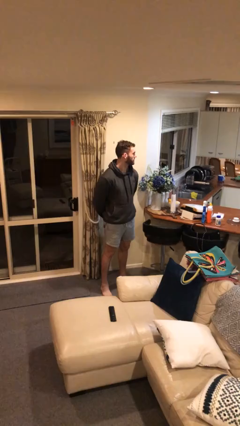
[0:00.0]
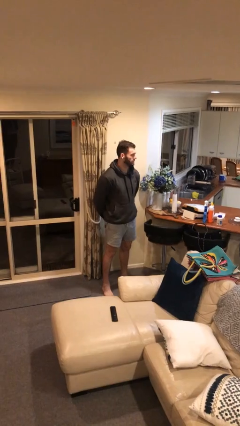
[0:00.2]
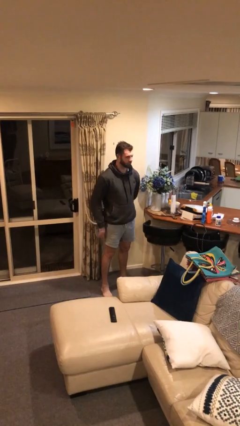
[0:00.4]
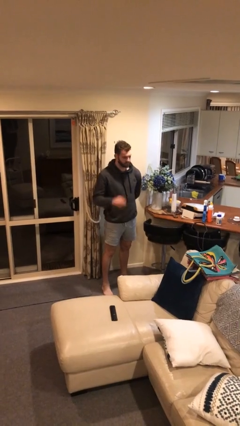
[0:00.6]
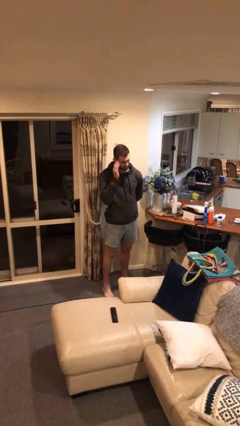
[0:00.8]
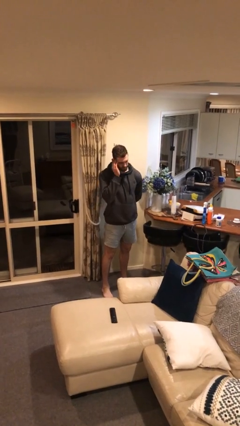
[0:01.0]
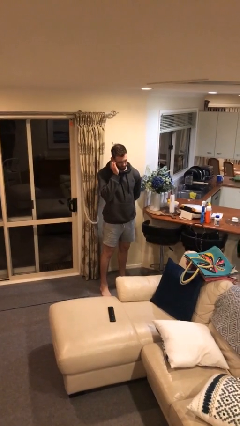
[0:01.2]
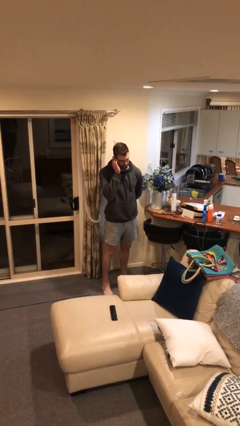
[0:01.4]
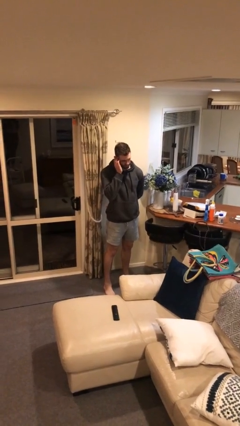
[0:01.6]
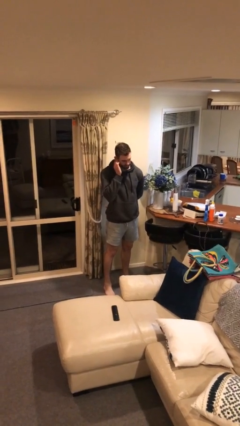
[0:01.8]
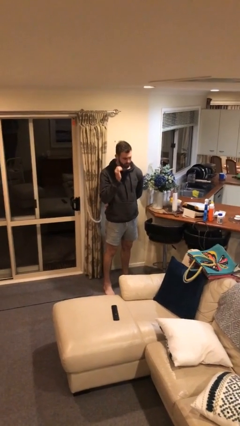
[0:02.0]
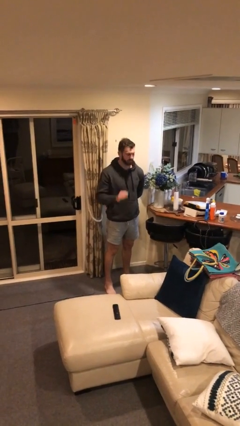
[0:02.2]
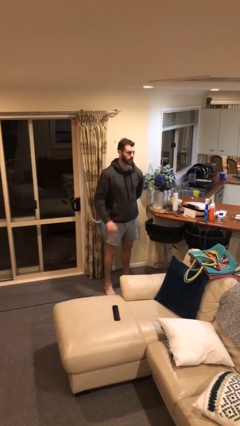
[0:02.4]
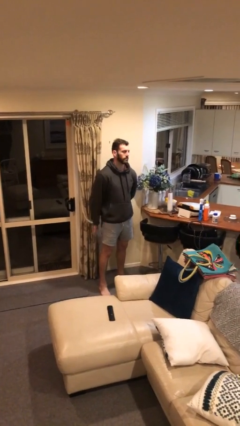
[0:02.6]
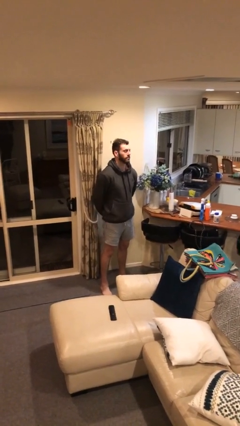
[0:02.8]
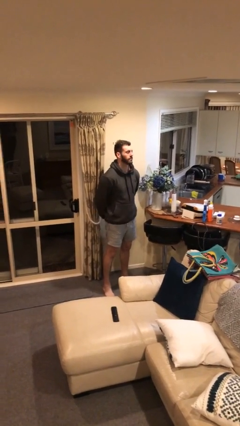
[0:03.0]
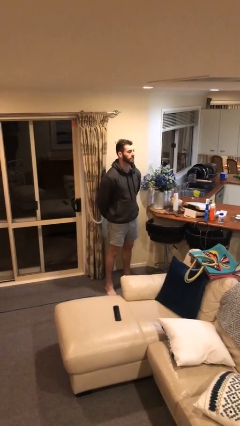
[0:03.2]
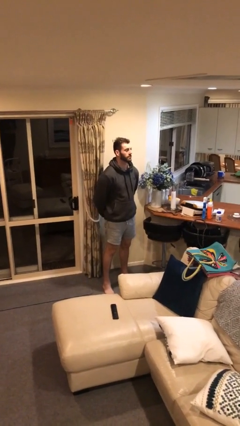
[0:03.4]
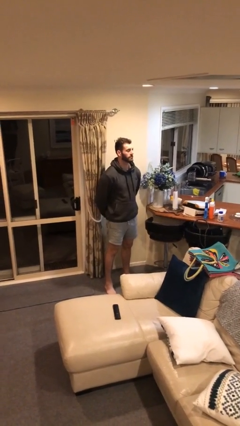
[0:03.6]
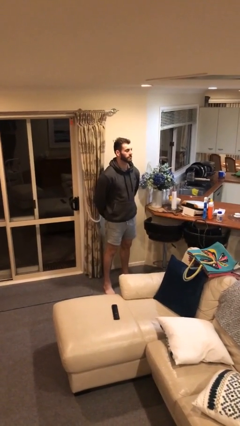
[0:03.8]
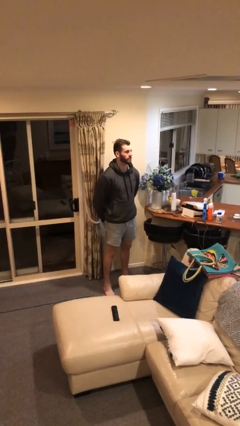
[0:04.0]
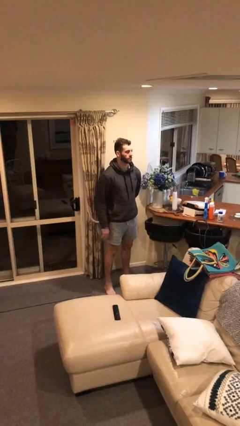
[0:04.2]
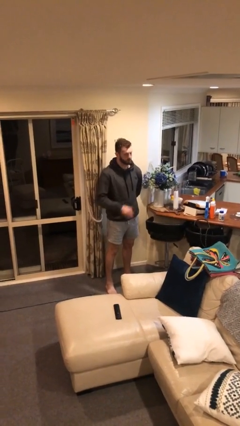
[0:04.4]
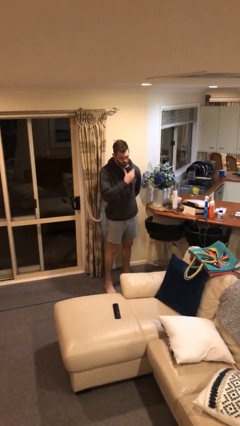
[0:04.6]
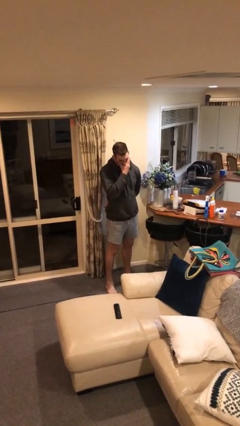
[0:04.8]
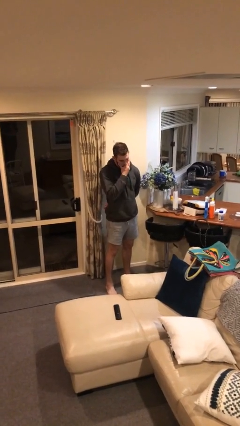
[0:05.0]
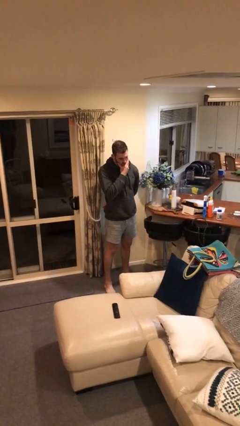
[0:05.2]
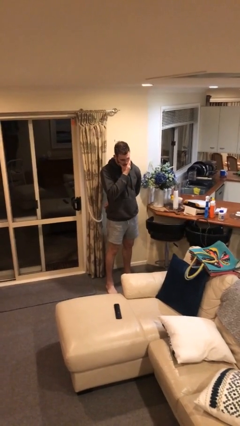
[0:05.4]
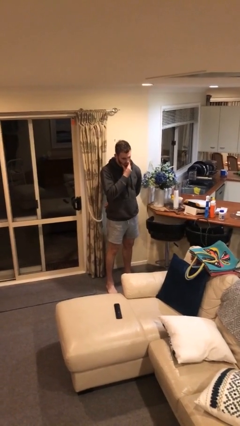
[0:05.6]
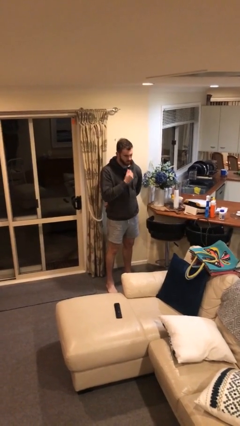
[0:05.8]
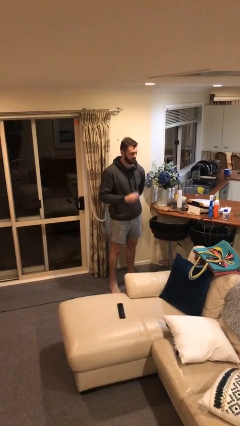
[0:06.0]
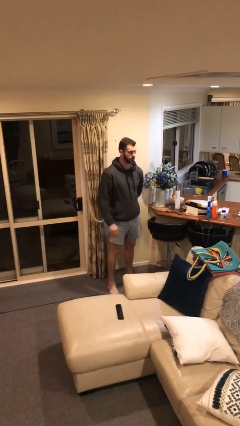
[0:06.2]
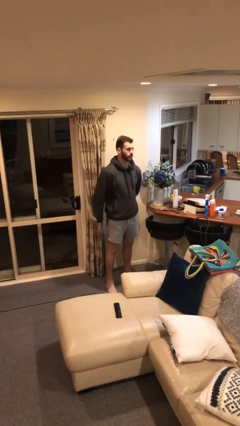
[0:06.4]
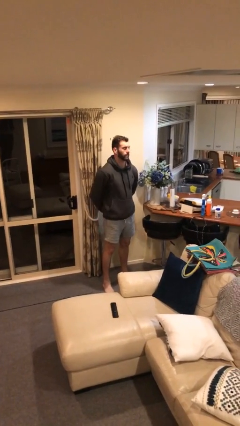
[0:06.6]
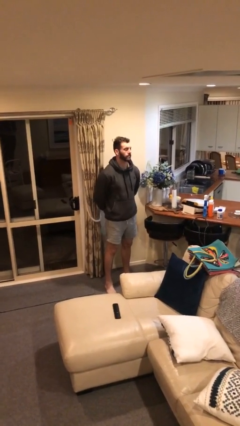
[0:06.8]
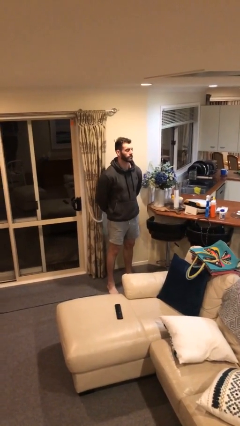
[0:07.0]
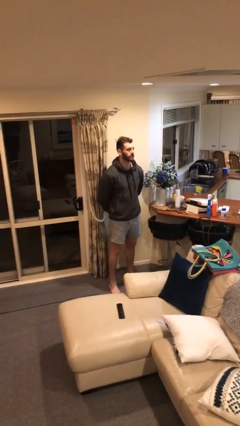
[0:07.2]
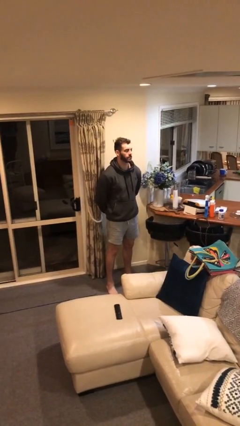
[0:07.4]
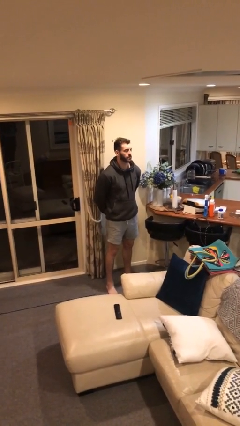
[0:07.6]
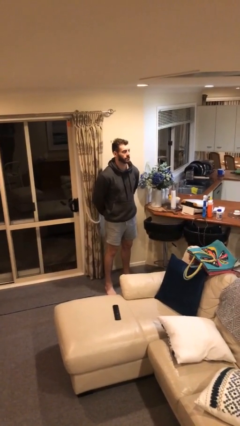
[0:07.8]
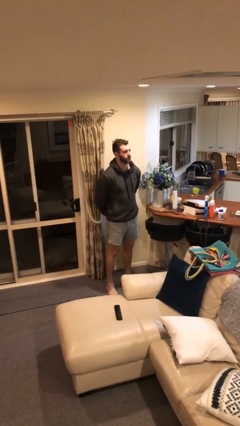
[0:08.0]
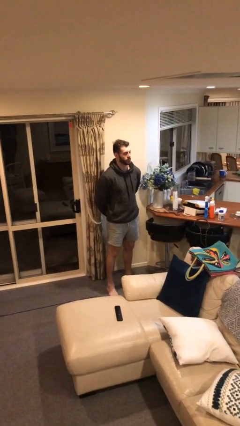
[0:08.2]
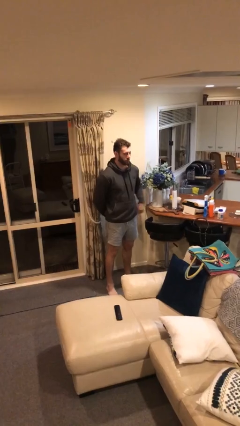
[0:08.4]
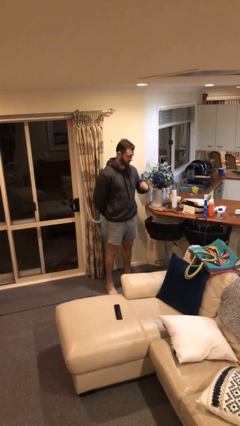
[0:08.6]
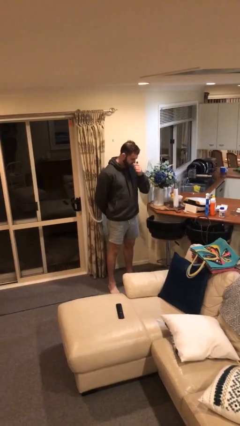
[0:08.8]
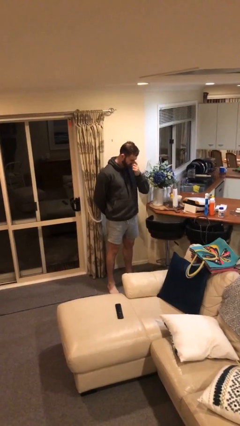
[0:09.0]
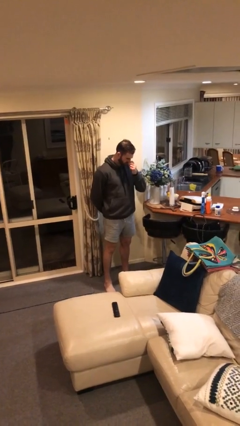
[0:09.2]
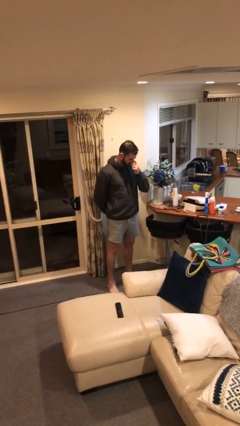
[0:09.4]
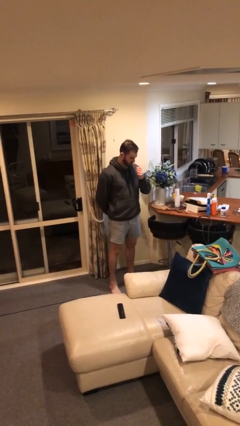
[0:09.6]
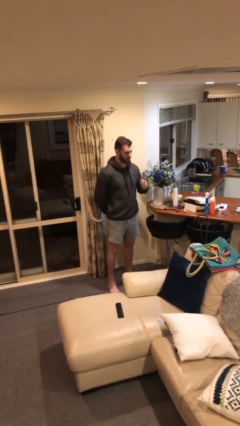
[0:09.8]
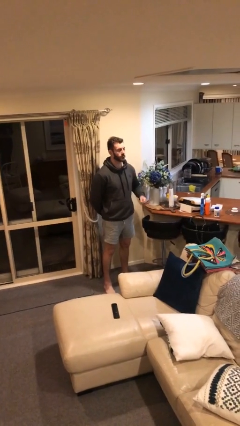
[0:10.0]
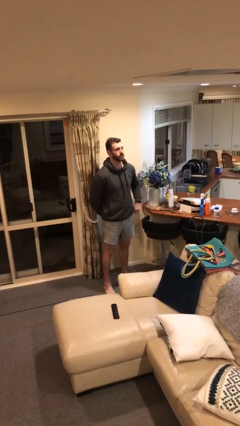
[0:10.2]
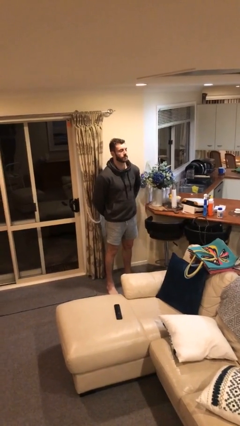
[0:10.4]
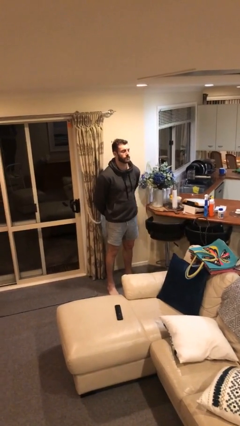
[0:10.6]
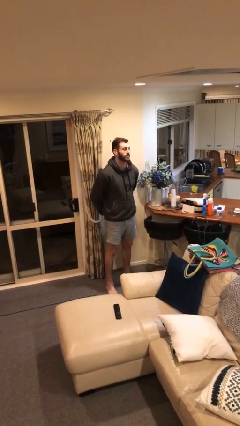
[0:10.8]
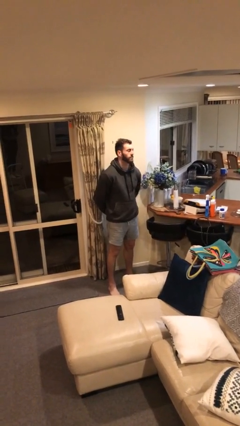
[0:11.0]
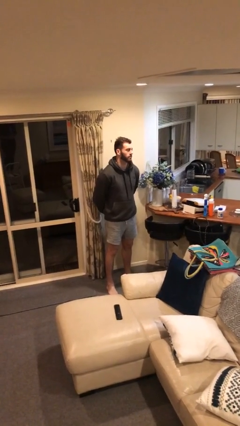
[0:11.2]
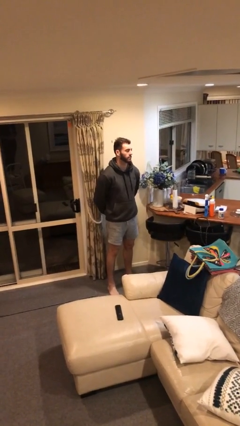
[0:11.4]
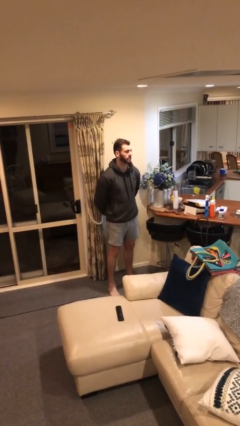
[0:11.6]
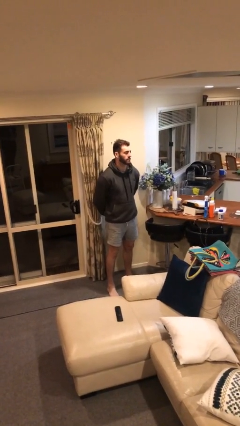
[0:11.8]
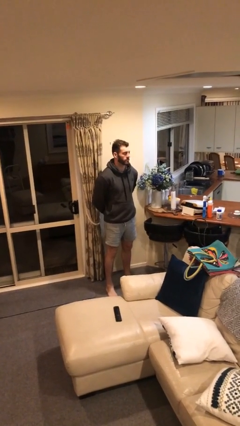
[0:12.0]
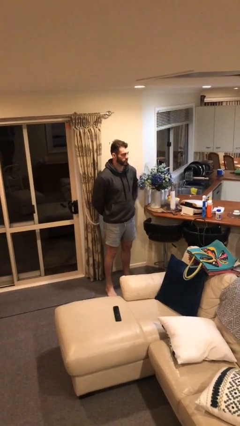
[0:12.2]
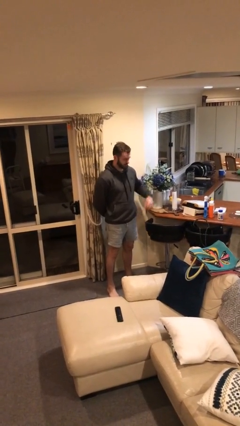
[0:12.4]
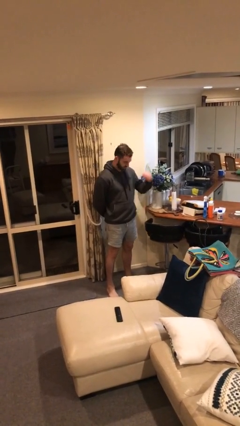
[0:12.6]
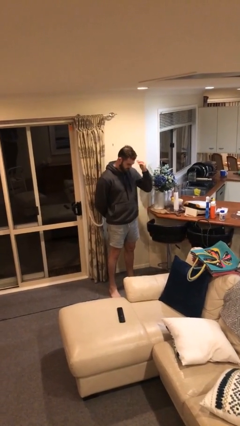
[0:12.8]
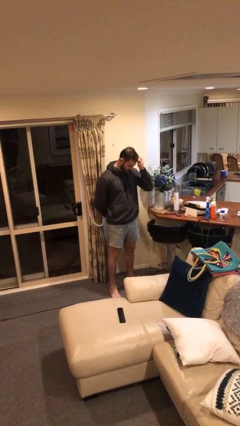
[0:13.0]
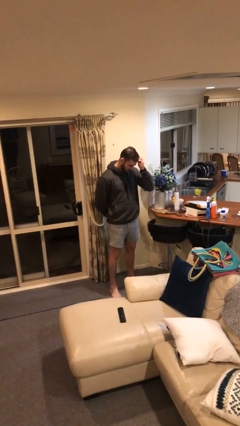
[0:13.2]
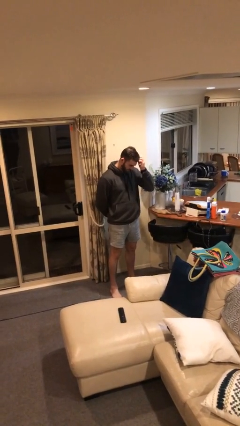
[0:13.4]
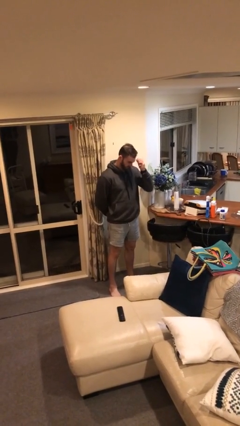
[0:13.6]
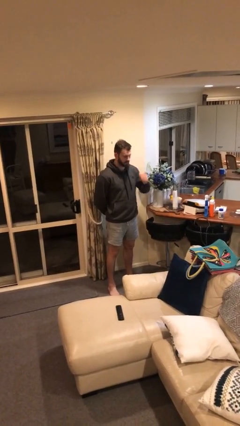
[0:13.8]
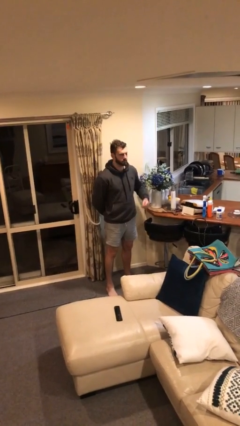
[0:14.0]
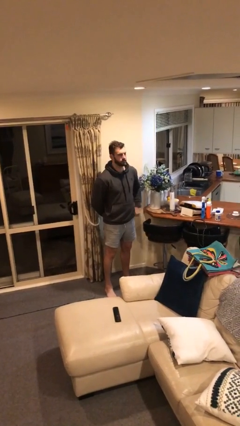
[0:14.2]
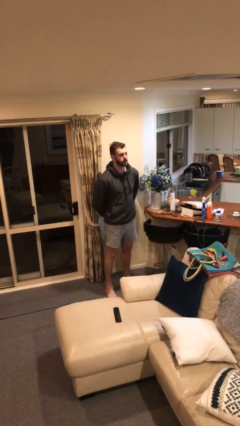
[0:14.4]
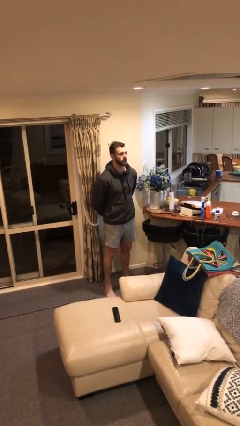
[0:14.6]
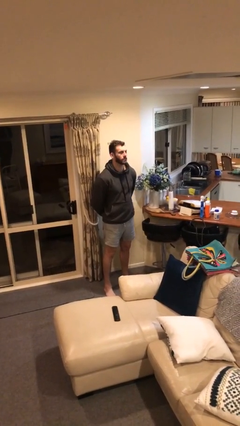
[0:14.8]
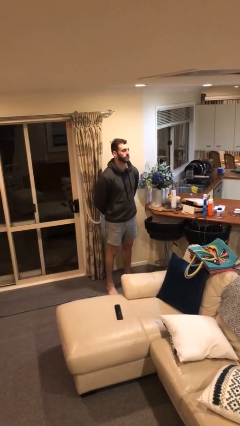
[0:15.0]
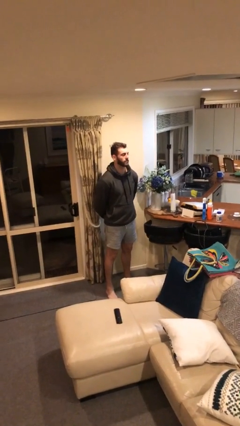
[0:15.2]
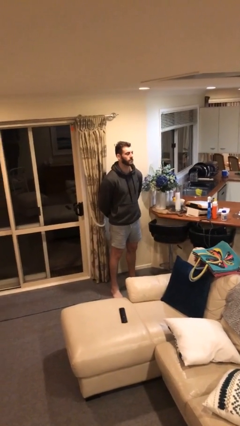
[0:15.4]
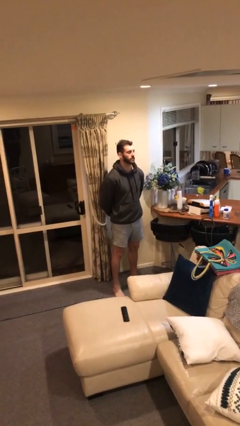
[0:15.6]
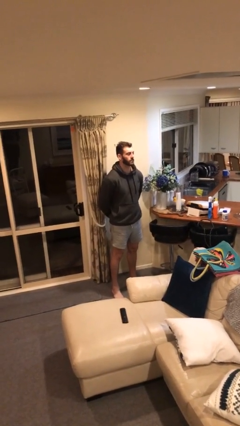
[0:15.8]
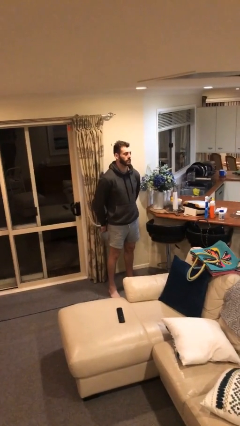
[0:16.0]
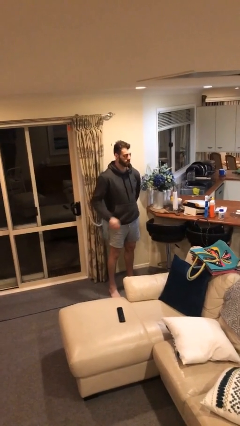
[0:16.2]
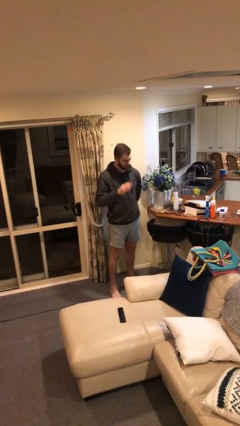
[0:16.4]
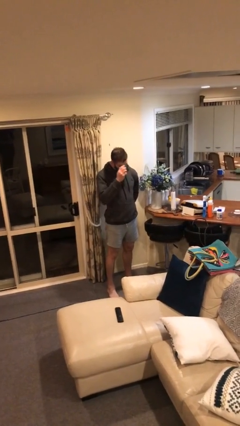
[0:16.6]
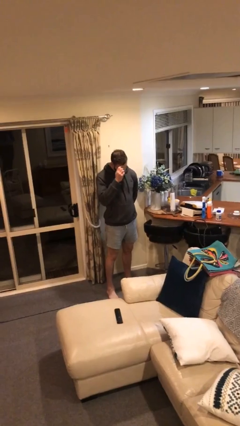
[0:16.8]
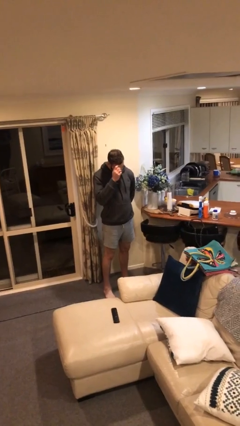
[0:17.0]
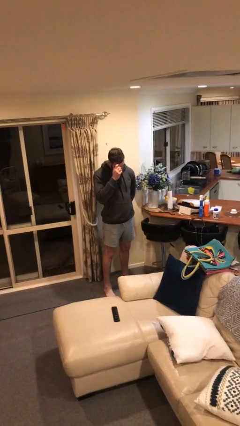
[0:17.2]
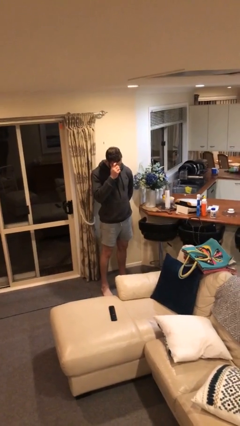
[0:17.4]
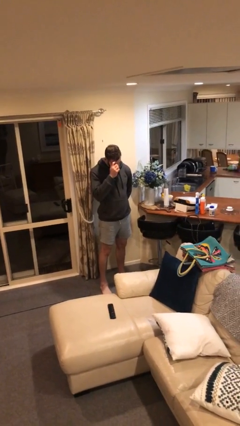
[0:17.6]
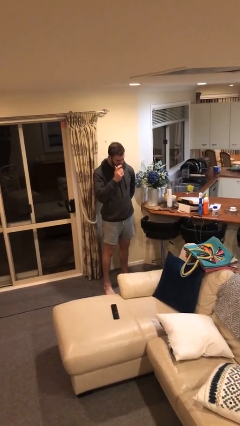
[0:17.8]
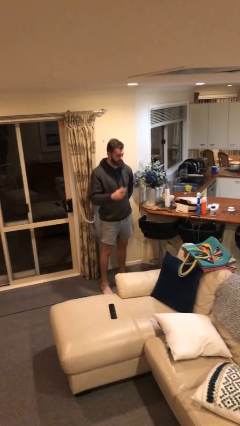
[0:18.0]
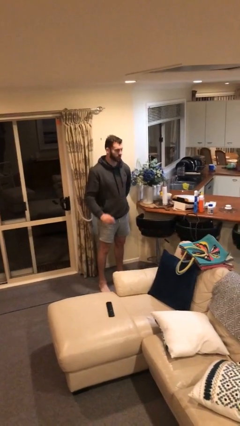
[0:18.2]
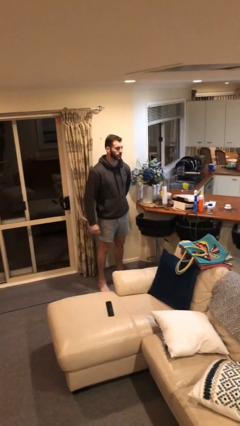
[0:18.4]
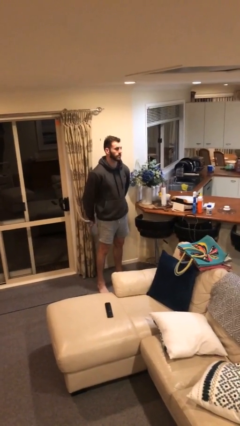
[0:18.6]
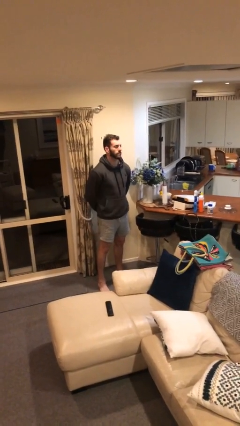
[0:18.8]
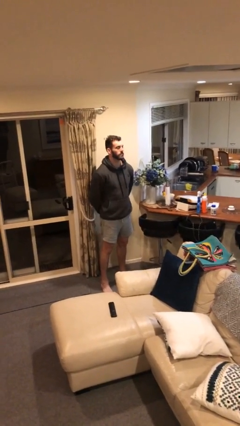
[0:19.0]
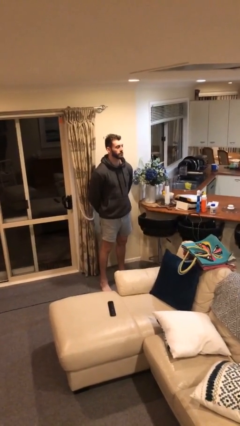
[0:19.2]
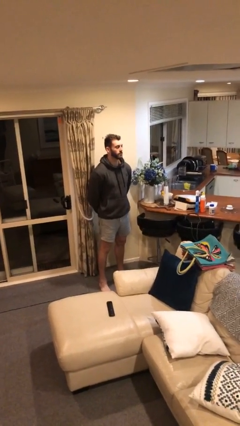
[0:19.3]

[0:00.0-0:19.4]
person scratches face
